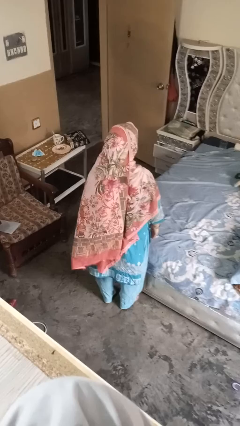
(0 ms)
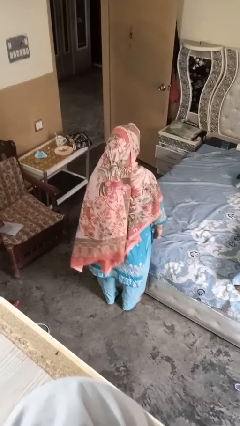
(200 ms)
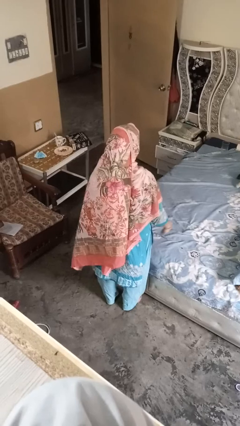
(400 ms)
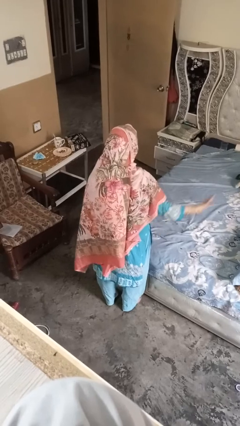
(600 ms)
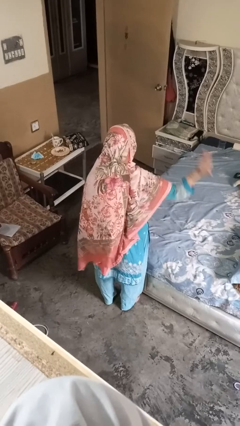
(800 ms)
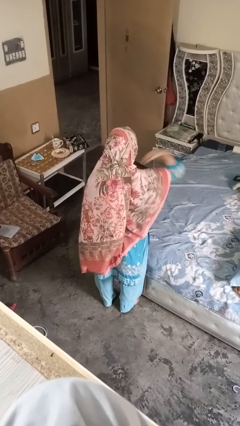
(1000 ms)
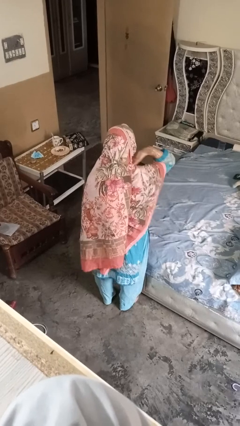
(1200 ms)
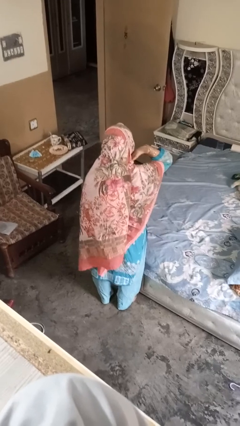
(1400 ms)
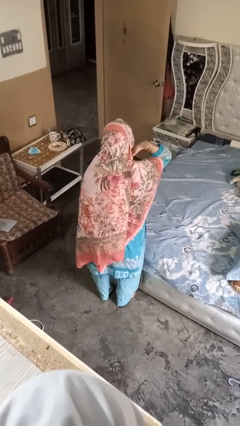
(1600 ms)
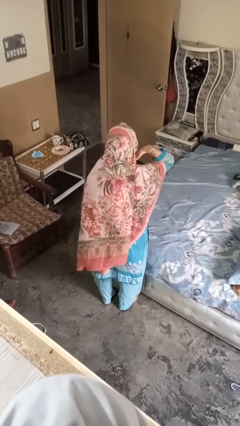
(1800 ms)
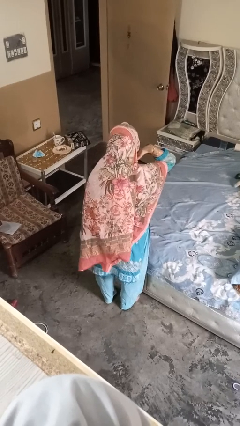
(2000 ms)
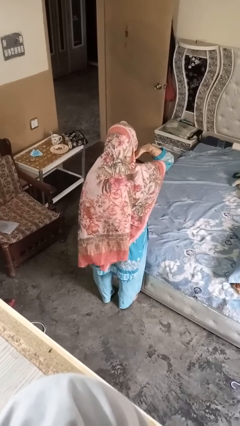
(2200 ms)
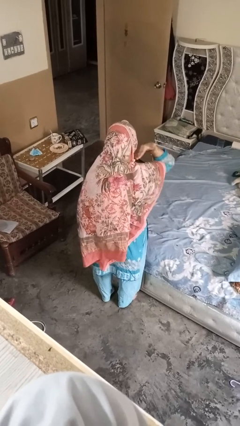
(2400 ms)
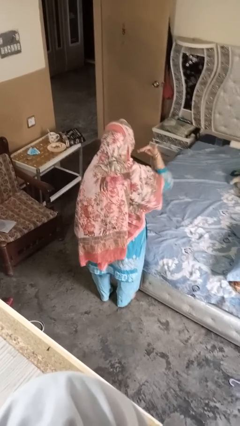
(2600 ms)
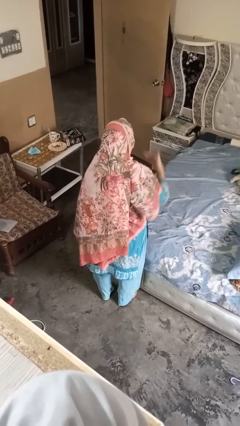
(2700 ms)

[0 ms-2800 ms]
person gestures cut

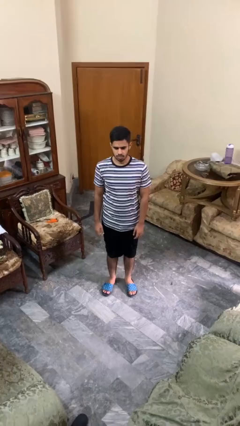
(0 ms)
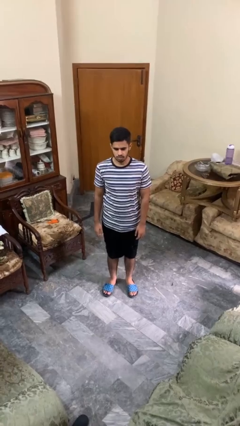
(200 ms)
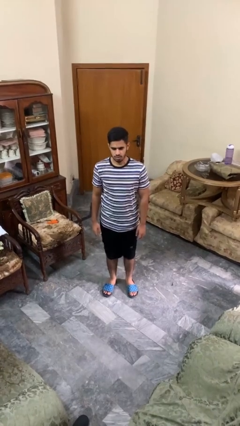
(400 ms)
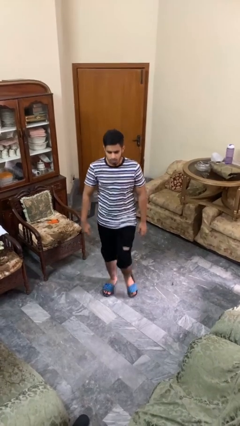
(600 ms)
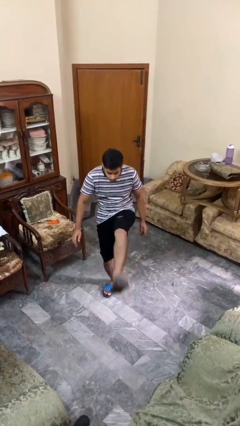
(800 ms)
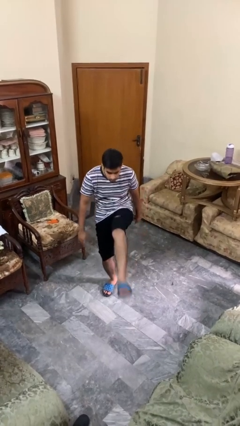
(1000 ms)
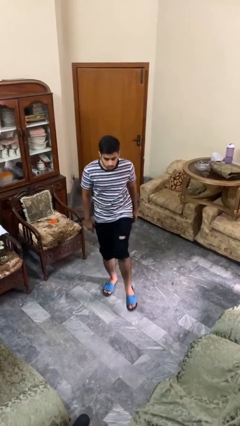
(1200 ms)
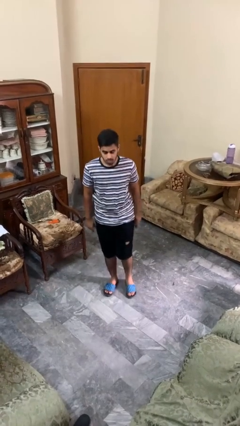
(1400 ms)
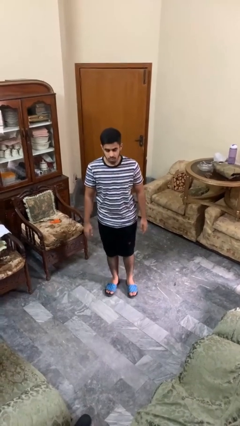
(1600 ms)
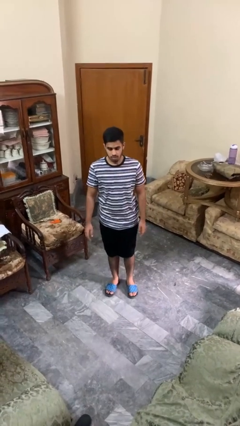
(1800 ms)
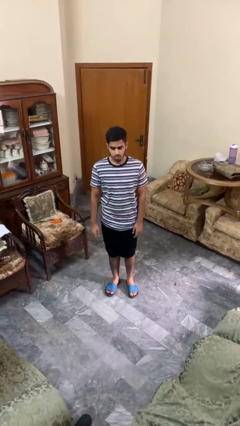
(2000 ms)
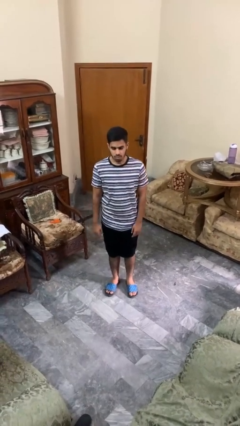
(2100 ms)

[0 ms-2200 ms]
person karate kicks

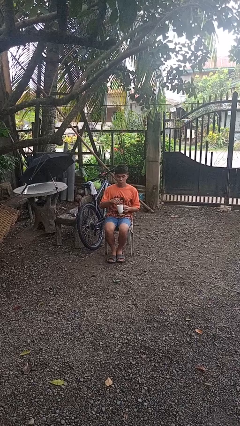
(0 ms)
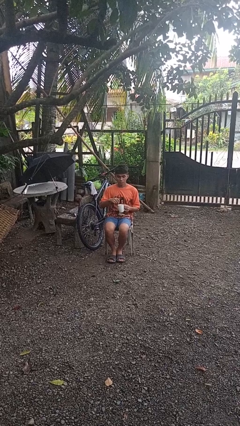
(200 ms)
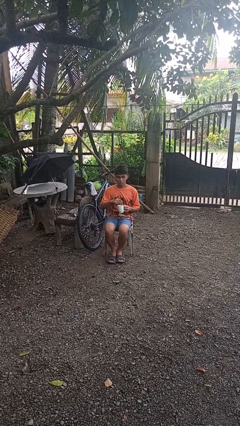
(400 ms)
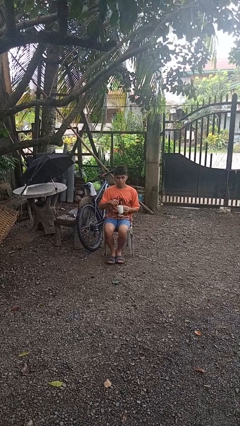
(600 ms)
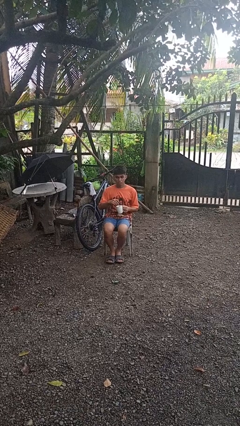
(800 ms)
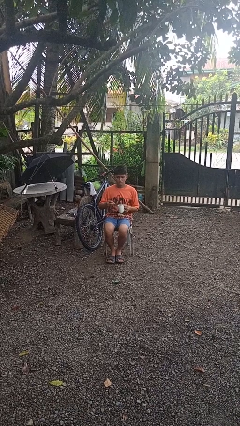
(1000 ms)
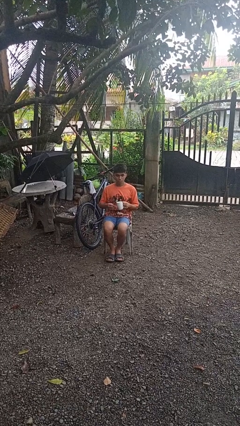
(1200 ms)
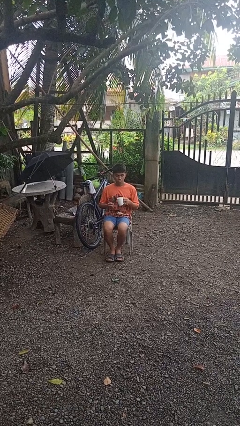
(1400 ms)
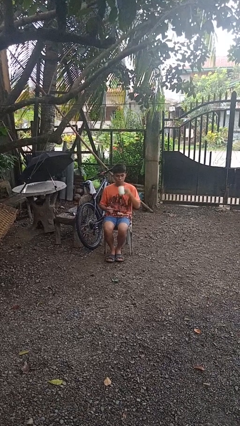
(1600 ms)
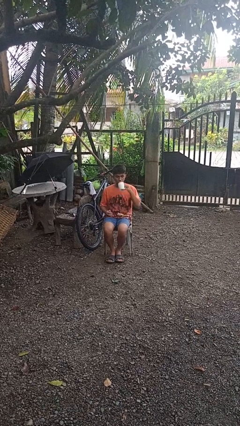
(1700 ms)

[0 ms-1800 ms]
person stirs mug

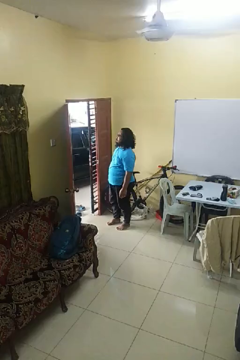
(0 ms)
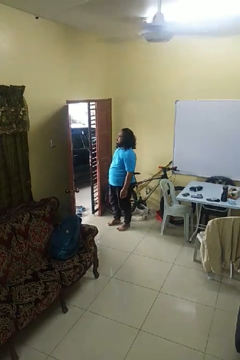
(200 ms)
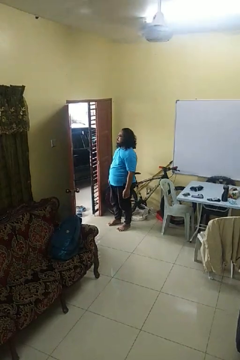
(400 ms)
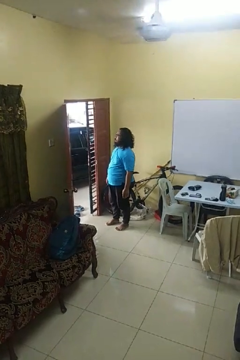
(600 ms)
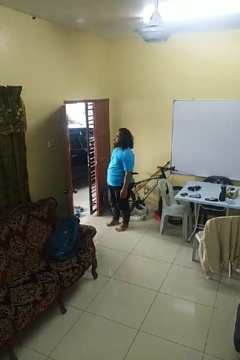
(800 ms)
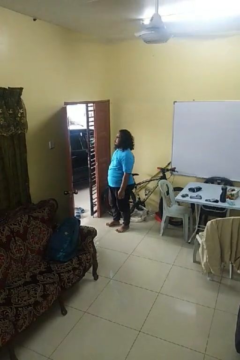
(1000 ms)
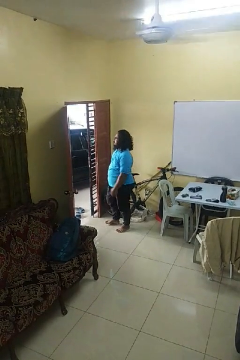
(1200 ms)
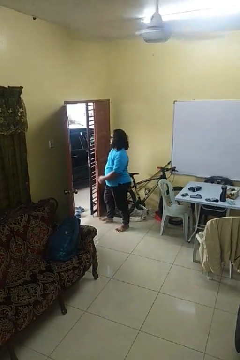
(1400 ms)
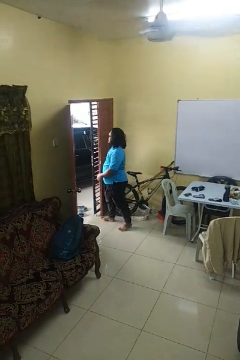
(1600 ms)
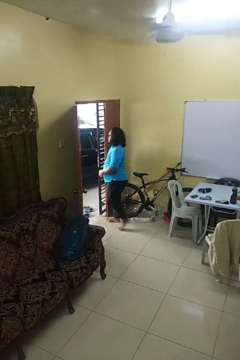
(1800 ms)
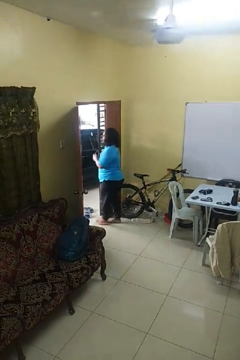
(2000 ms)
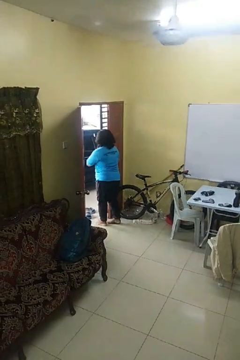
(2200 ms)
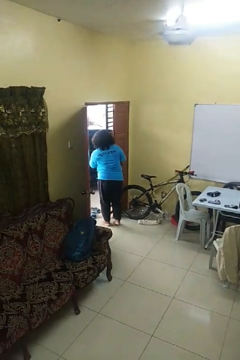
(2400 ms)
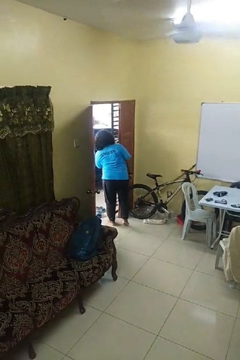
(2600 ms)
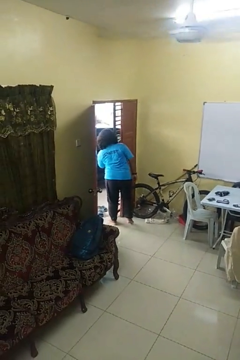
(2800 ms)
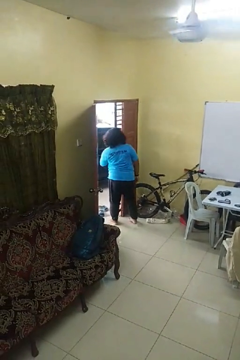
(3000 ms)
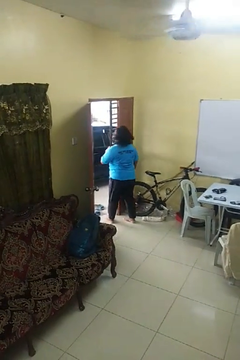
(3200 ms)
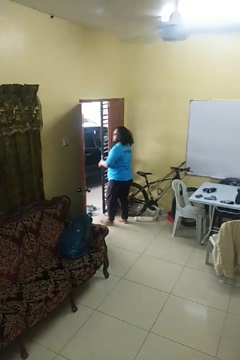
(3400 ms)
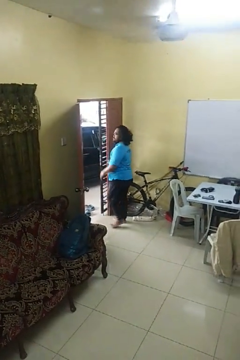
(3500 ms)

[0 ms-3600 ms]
person bumps into wall

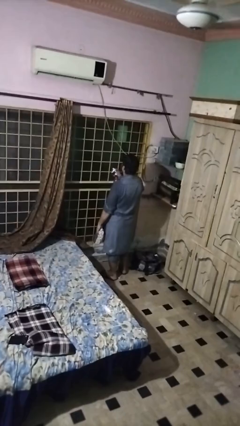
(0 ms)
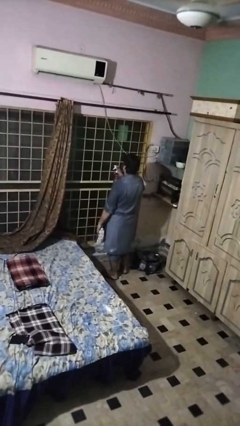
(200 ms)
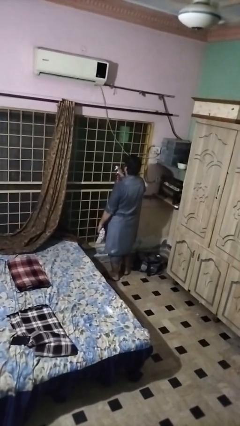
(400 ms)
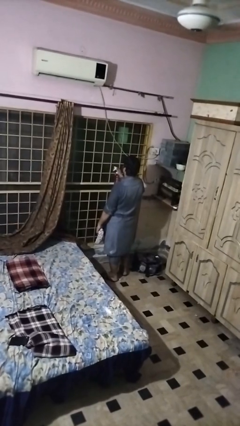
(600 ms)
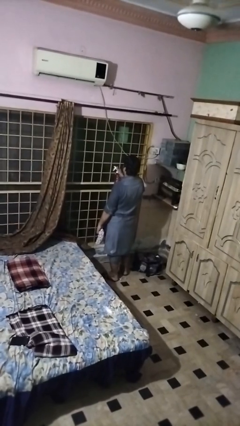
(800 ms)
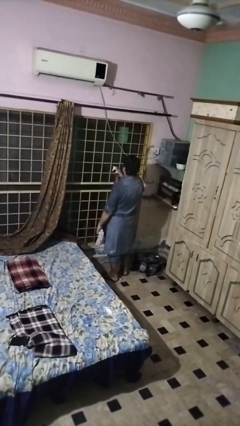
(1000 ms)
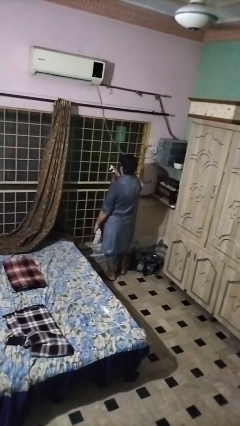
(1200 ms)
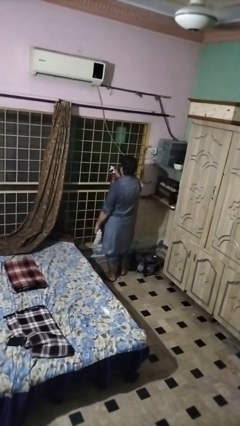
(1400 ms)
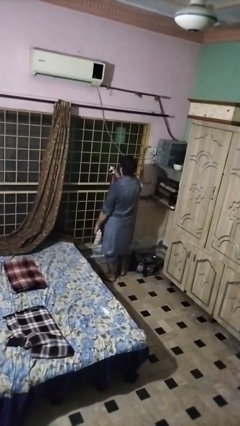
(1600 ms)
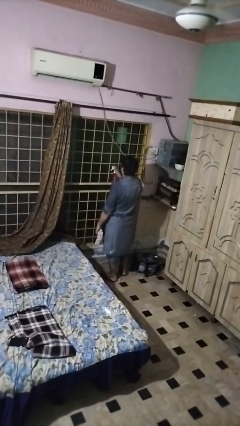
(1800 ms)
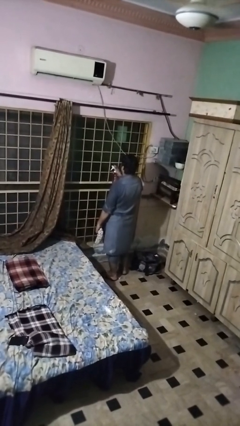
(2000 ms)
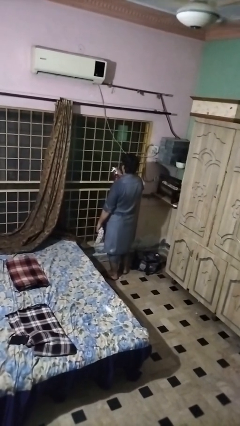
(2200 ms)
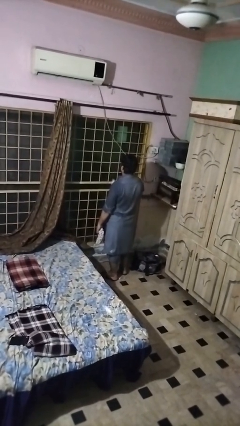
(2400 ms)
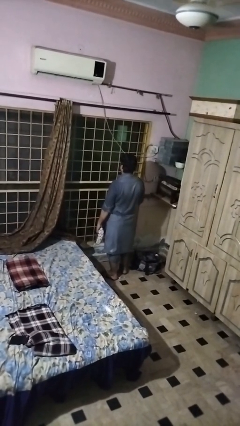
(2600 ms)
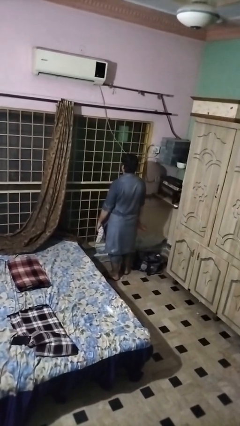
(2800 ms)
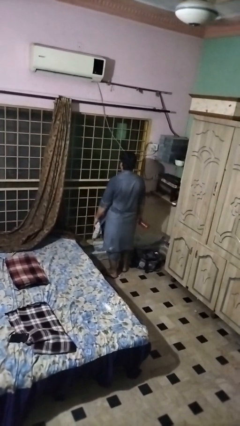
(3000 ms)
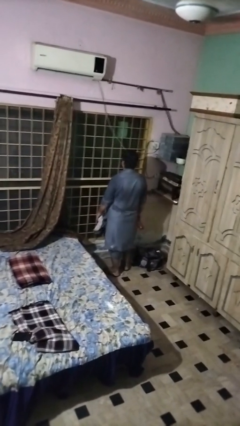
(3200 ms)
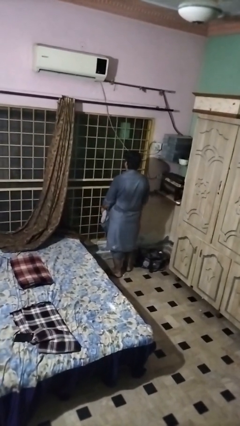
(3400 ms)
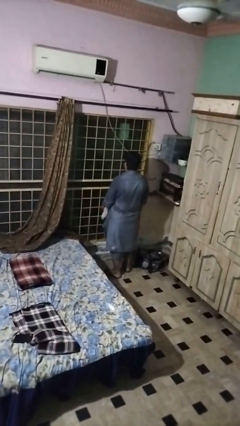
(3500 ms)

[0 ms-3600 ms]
person sprays from bottle

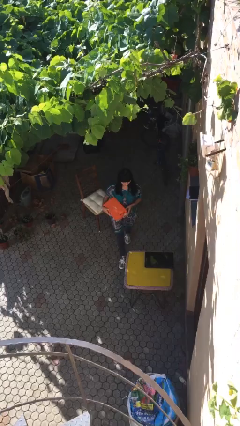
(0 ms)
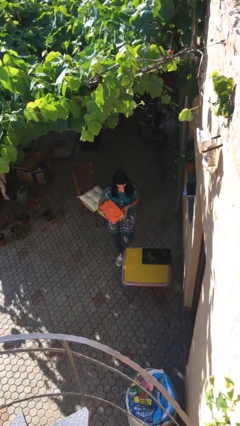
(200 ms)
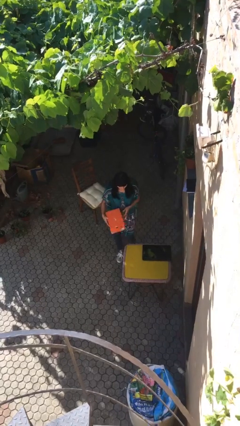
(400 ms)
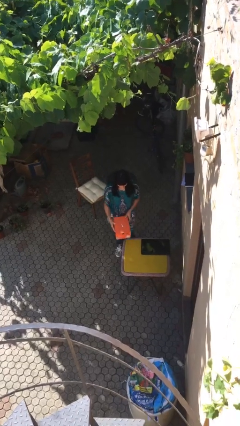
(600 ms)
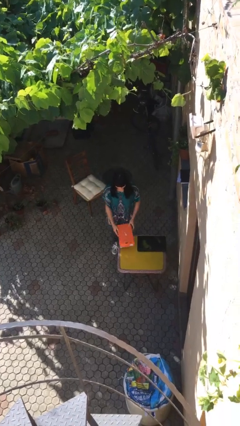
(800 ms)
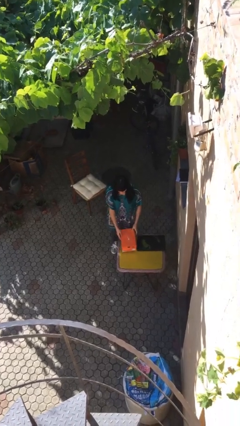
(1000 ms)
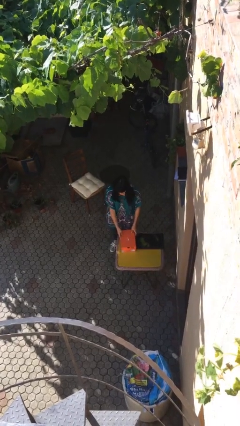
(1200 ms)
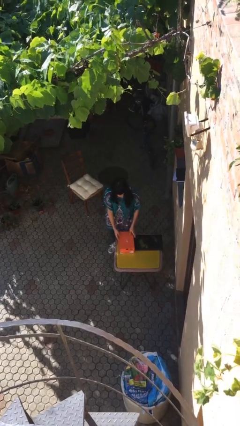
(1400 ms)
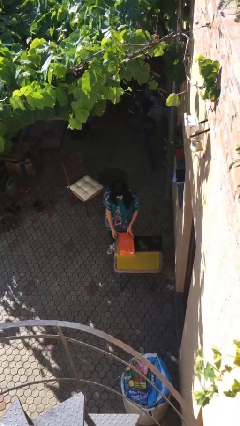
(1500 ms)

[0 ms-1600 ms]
person puts down object on table

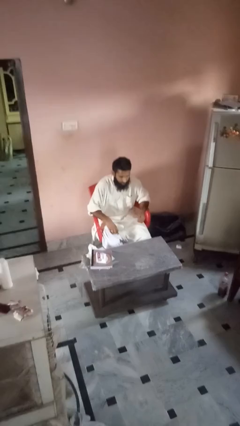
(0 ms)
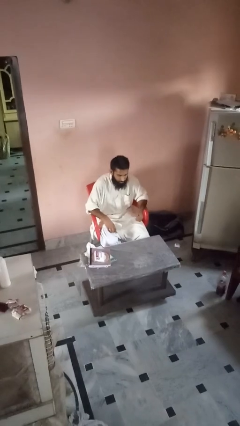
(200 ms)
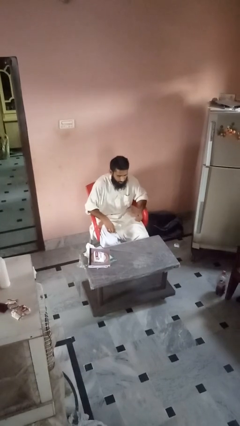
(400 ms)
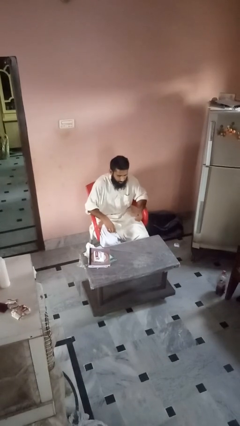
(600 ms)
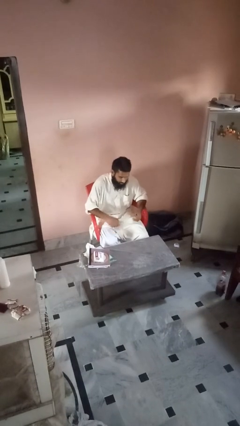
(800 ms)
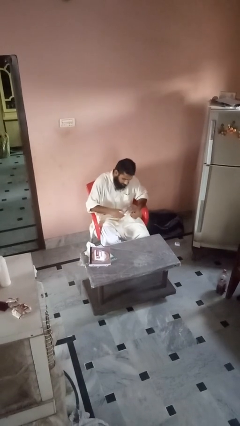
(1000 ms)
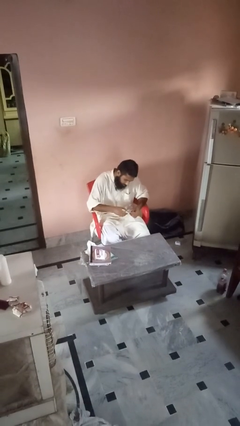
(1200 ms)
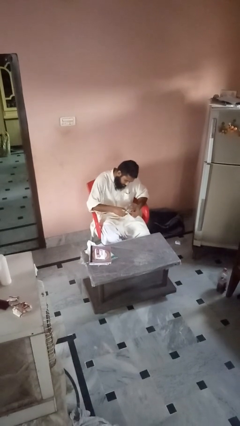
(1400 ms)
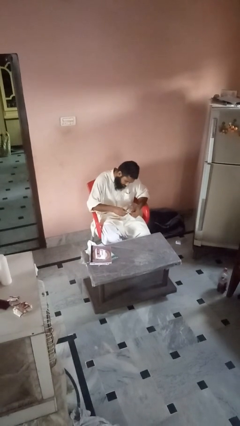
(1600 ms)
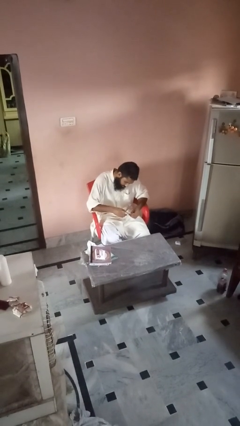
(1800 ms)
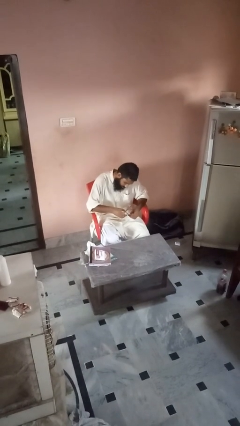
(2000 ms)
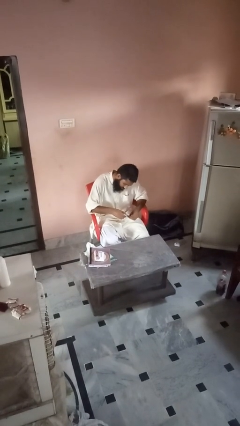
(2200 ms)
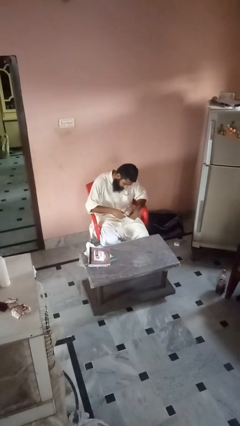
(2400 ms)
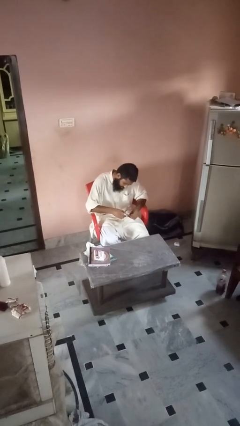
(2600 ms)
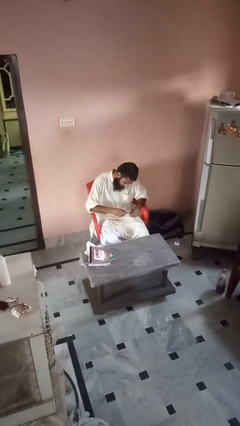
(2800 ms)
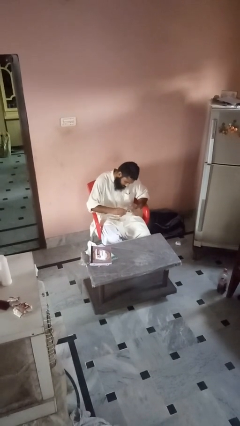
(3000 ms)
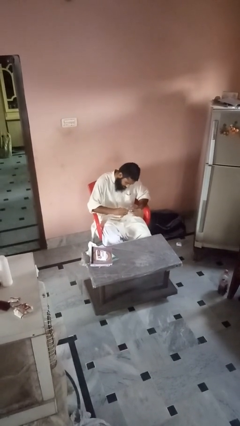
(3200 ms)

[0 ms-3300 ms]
person clips fingernails
